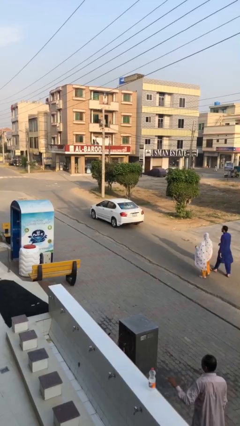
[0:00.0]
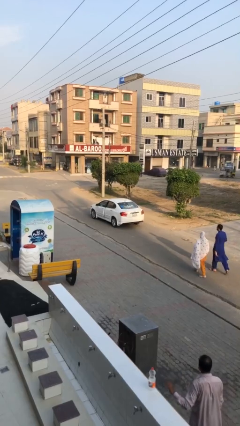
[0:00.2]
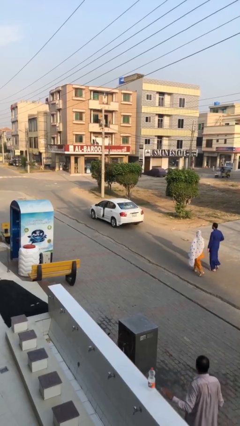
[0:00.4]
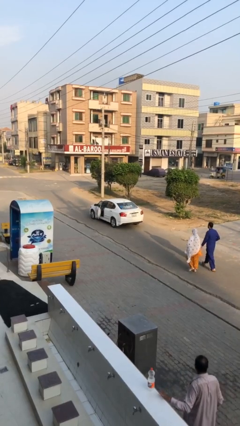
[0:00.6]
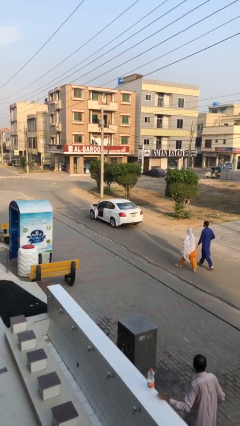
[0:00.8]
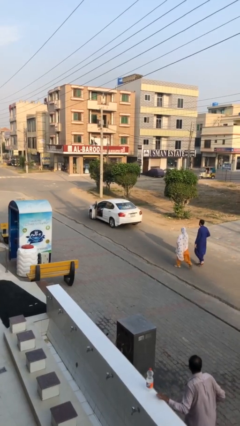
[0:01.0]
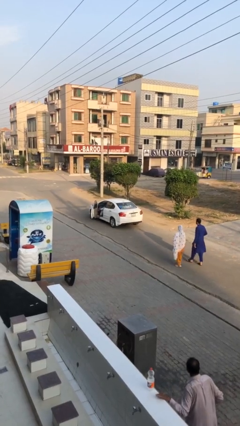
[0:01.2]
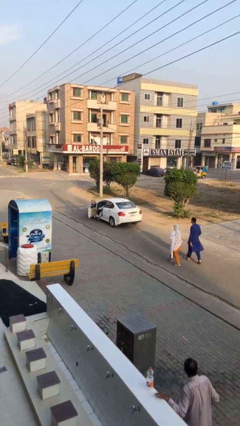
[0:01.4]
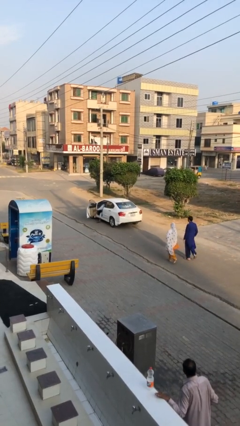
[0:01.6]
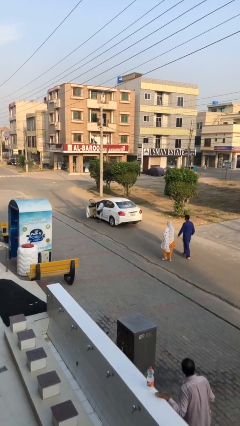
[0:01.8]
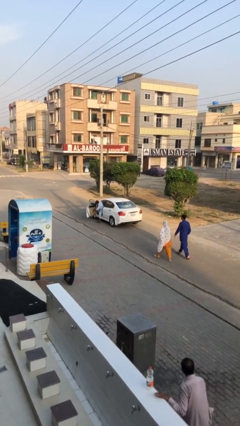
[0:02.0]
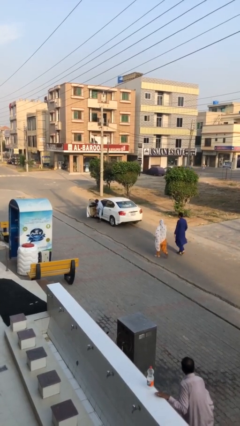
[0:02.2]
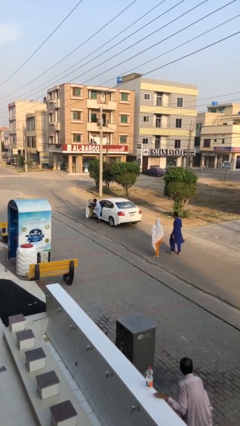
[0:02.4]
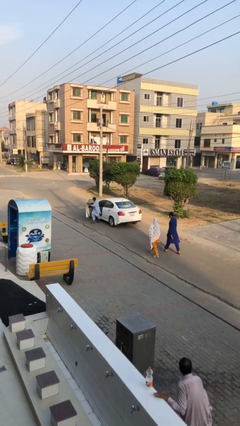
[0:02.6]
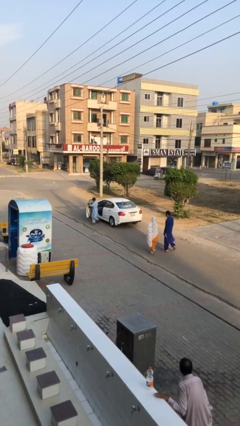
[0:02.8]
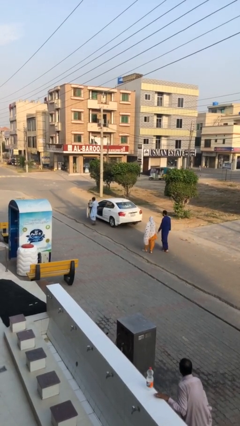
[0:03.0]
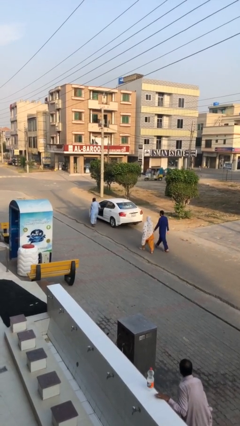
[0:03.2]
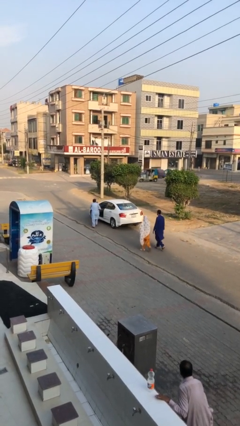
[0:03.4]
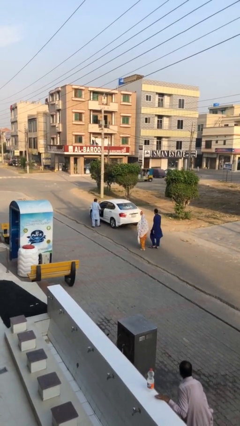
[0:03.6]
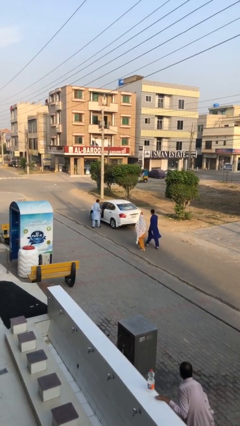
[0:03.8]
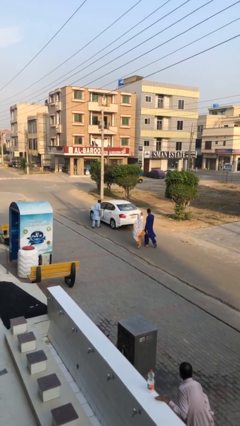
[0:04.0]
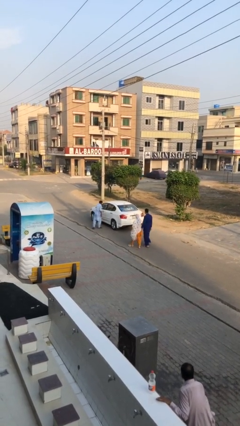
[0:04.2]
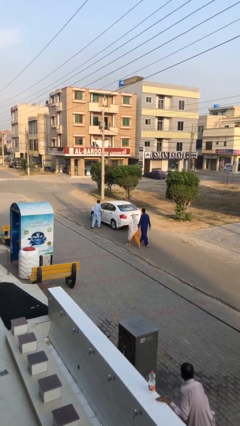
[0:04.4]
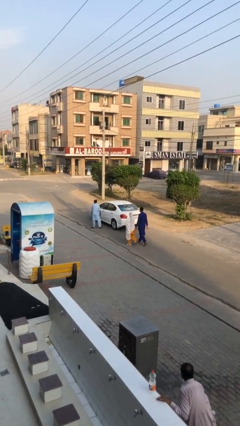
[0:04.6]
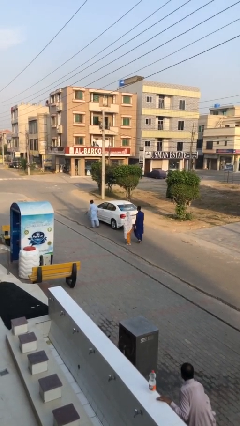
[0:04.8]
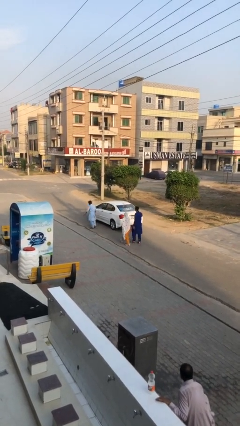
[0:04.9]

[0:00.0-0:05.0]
car drops off person

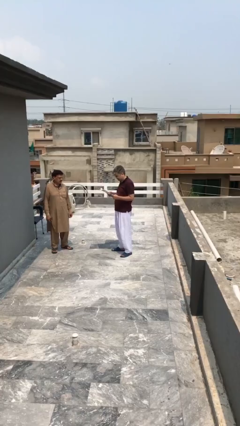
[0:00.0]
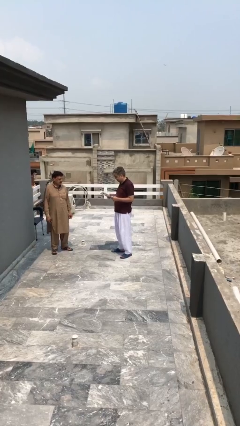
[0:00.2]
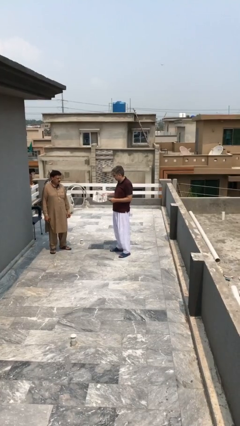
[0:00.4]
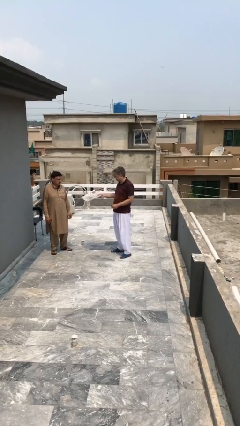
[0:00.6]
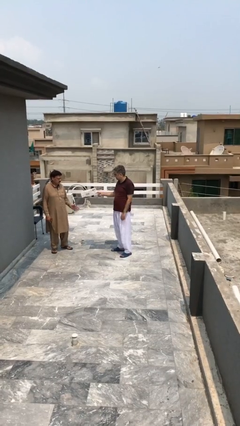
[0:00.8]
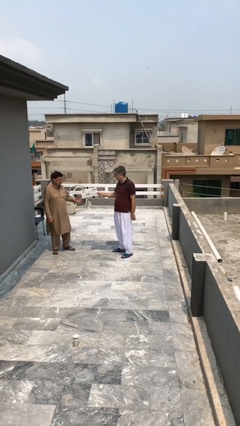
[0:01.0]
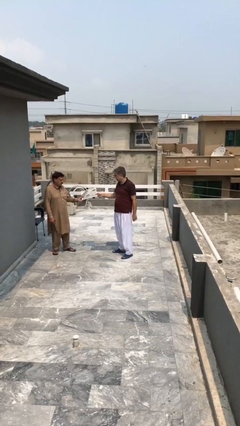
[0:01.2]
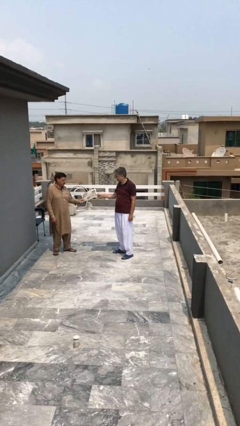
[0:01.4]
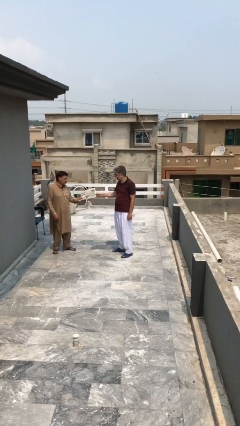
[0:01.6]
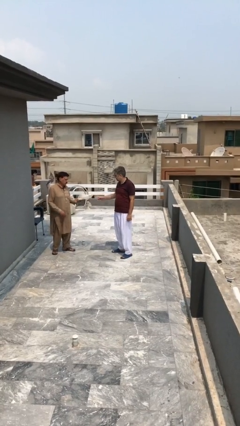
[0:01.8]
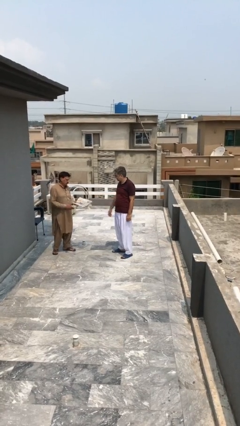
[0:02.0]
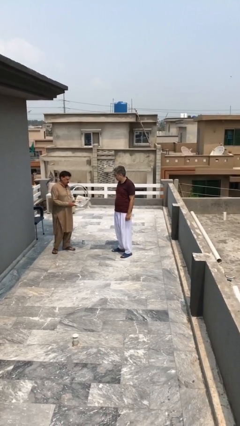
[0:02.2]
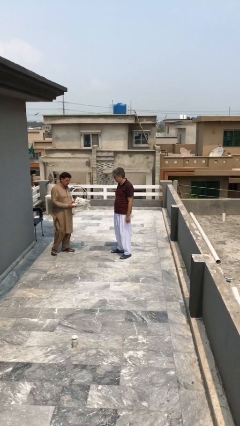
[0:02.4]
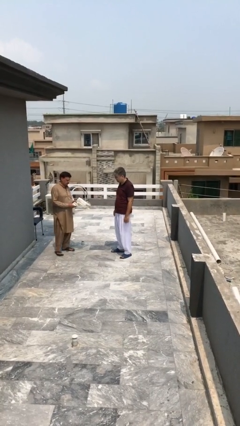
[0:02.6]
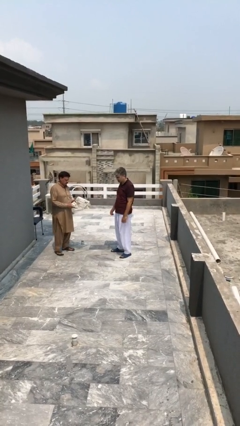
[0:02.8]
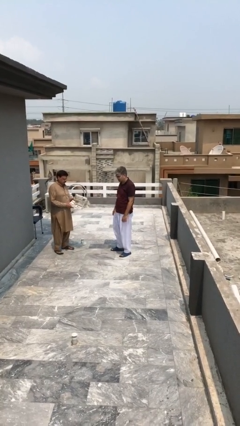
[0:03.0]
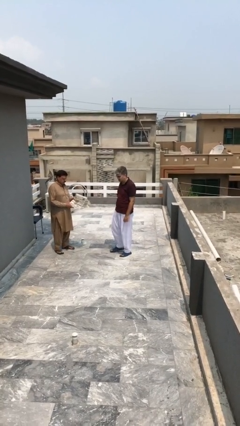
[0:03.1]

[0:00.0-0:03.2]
person transfers object to person

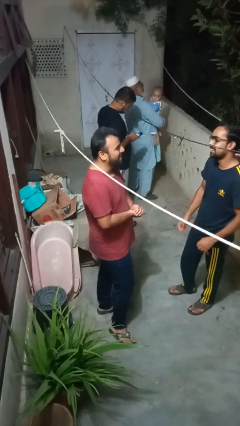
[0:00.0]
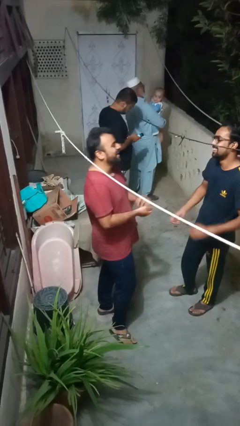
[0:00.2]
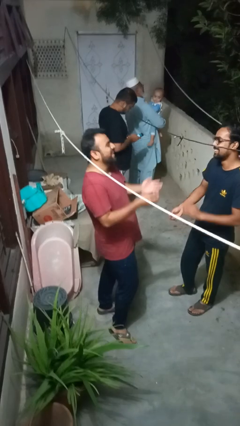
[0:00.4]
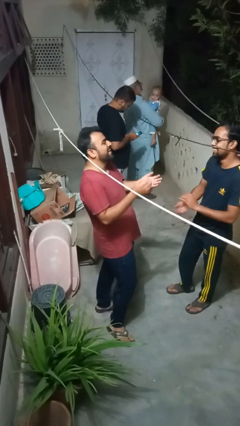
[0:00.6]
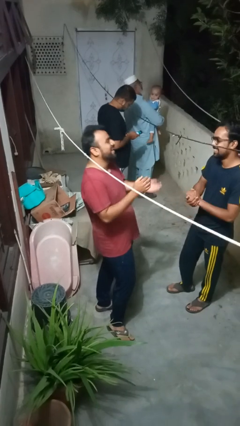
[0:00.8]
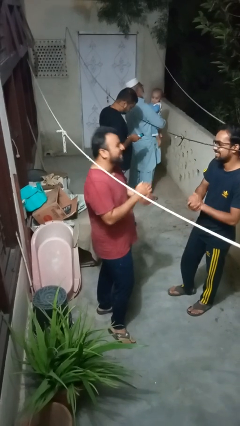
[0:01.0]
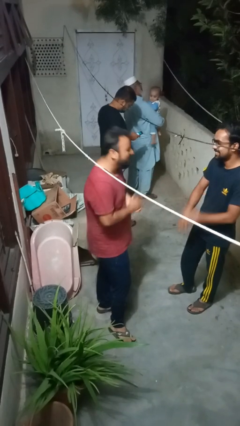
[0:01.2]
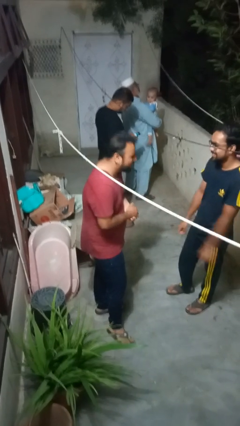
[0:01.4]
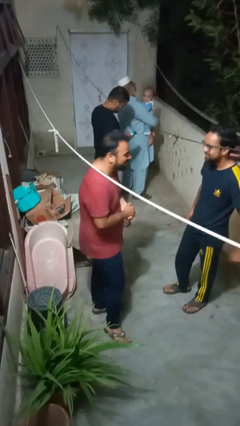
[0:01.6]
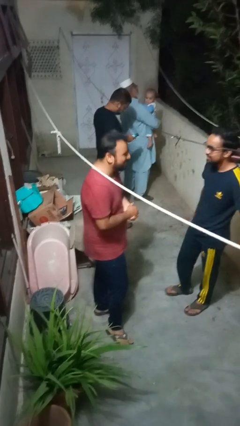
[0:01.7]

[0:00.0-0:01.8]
person laughs with person

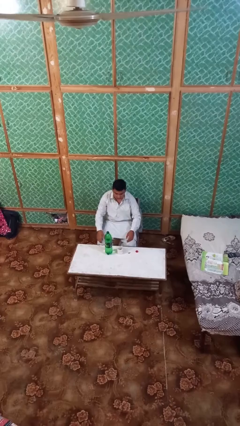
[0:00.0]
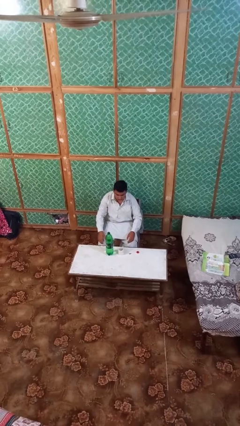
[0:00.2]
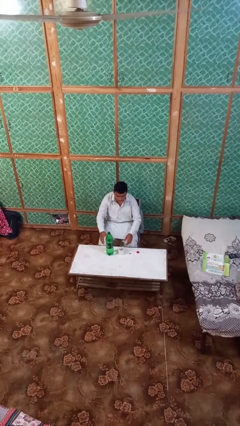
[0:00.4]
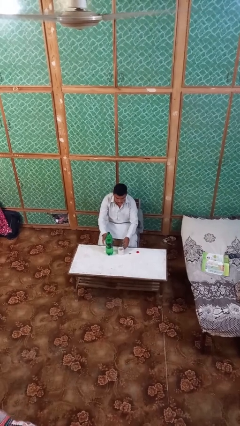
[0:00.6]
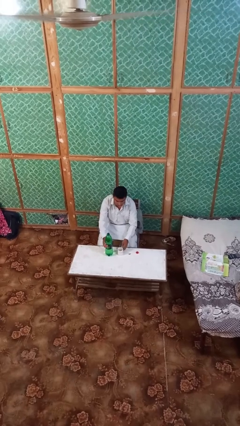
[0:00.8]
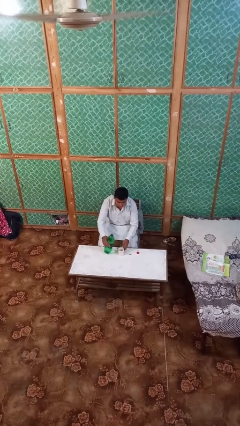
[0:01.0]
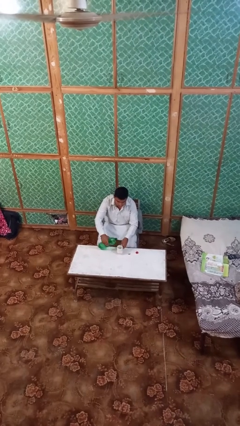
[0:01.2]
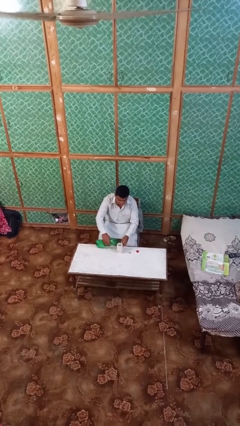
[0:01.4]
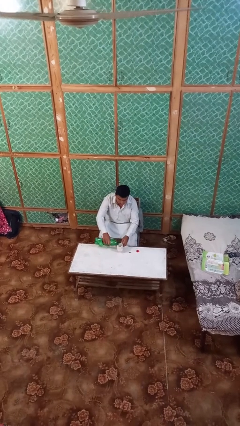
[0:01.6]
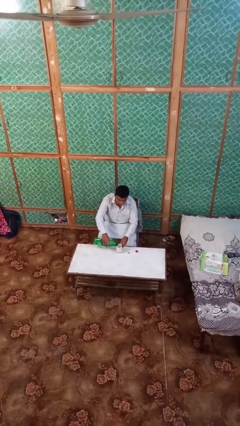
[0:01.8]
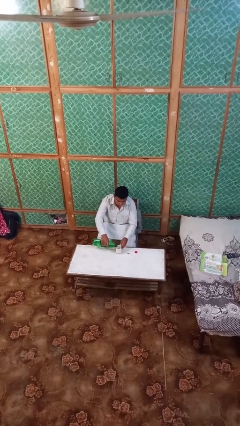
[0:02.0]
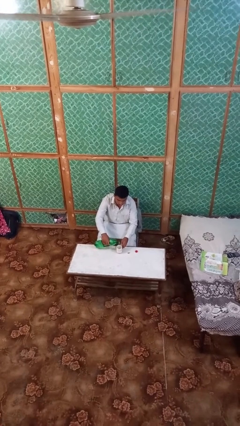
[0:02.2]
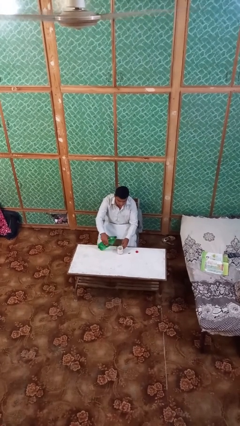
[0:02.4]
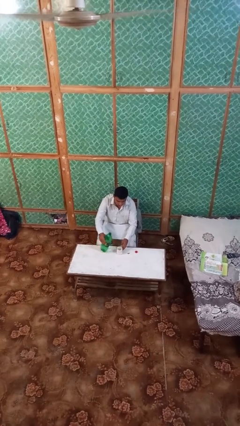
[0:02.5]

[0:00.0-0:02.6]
person pours liquid into cup

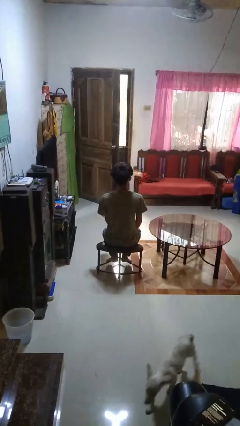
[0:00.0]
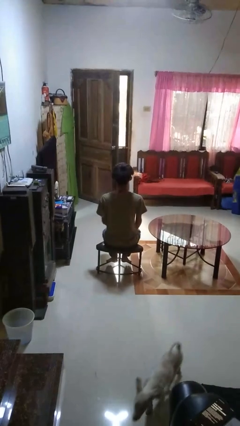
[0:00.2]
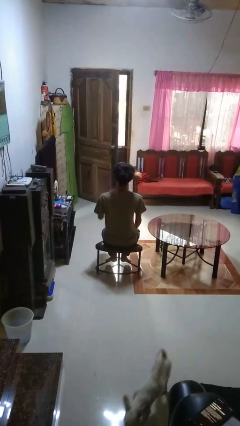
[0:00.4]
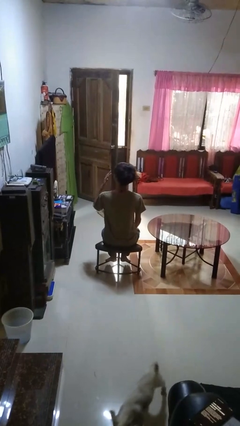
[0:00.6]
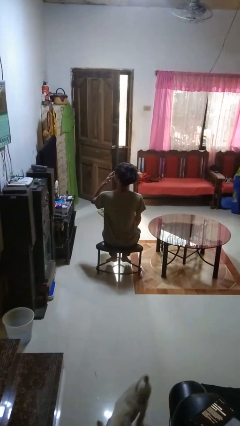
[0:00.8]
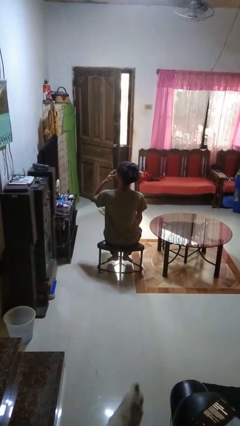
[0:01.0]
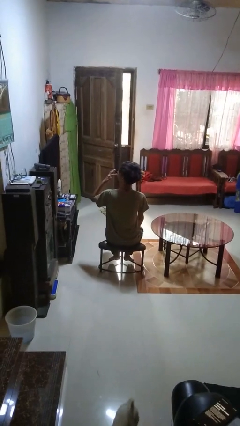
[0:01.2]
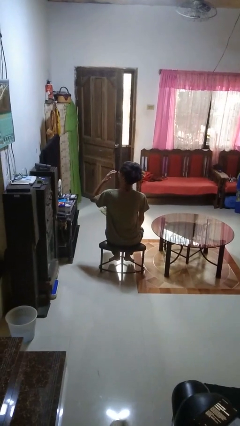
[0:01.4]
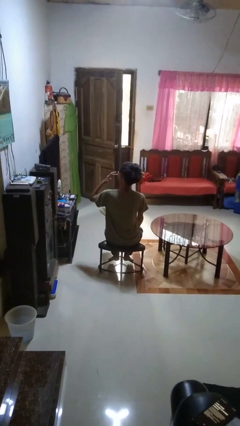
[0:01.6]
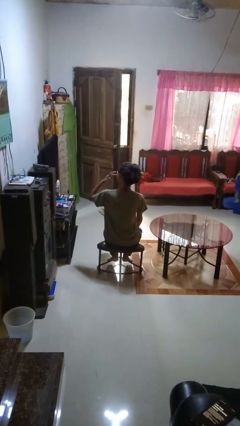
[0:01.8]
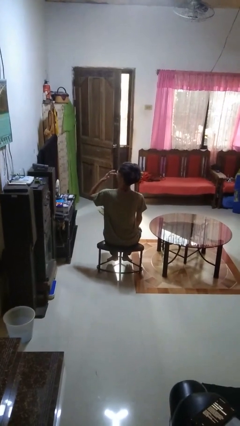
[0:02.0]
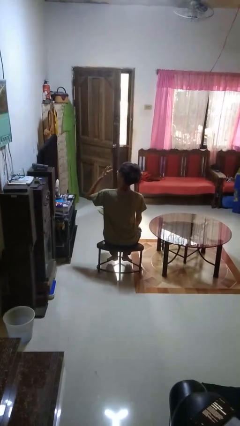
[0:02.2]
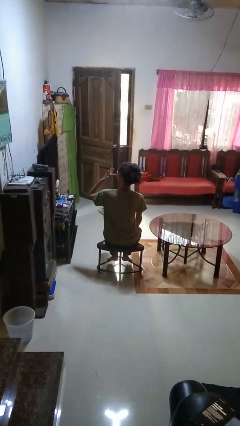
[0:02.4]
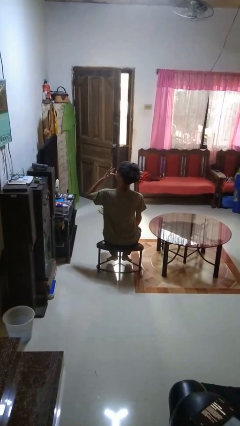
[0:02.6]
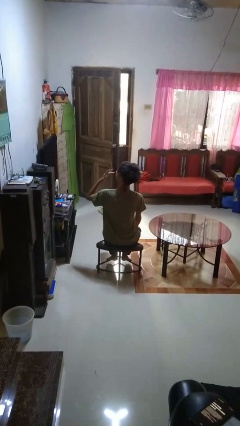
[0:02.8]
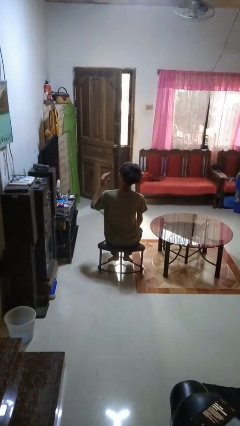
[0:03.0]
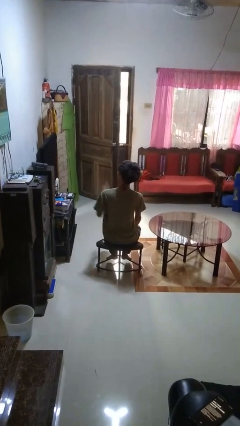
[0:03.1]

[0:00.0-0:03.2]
person licks fingers

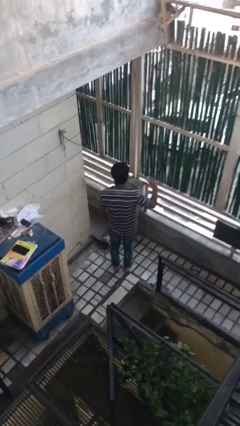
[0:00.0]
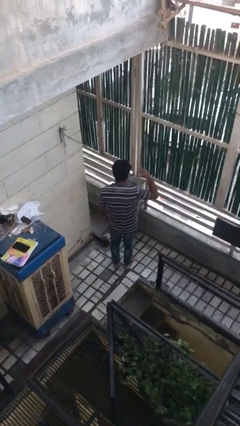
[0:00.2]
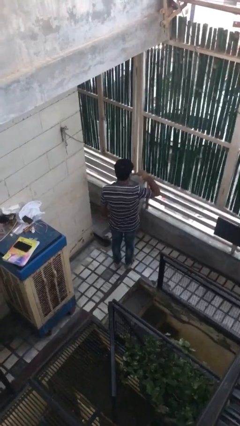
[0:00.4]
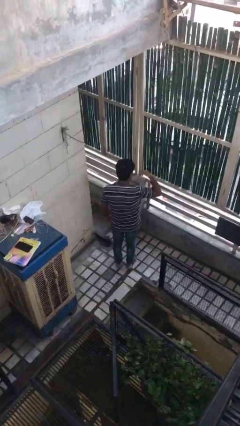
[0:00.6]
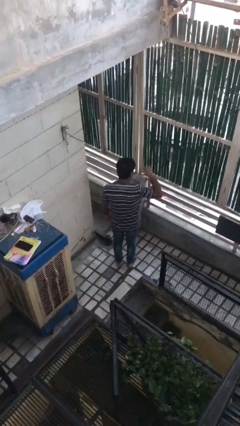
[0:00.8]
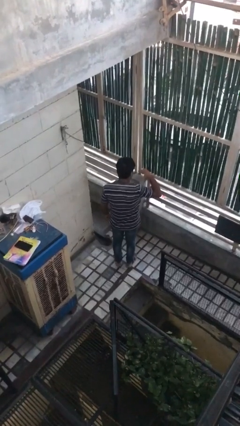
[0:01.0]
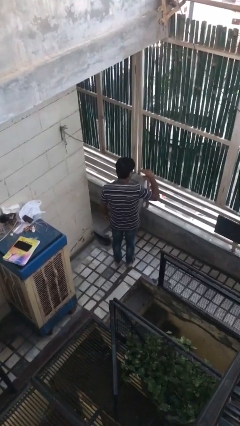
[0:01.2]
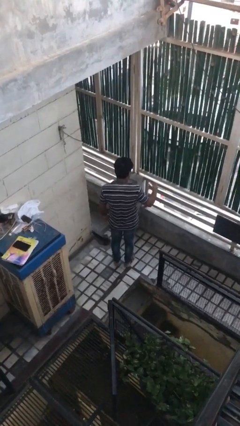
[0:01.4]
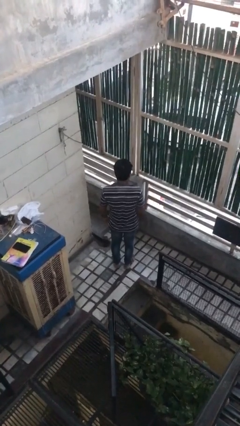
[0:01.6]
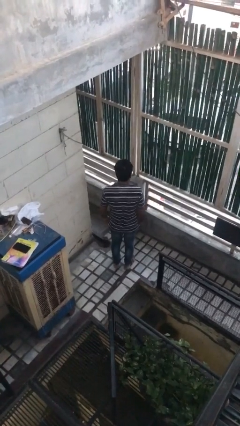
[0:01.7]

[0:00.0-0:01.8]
person gestures behind me
